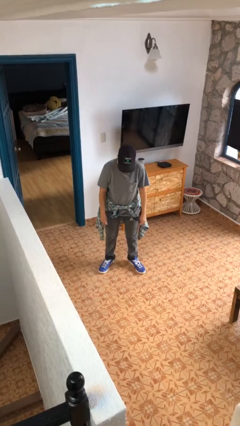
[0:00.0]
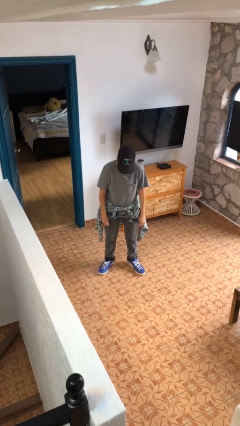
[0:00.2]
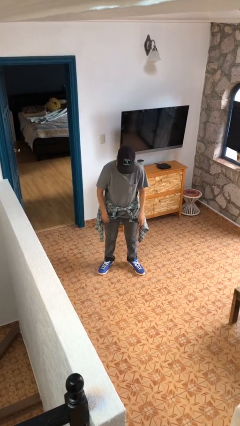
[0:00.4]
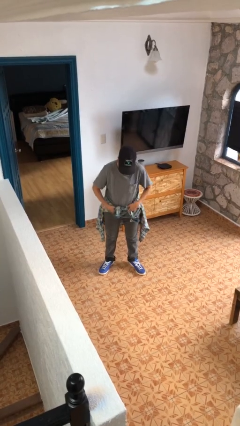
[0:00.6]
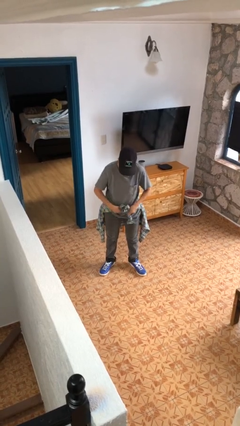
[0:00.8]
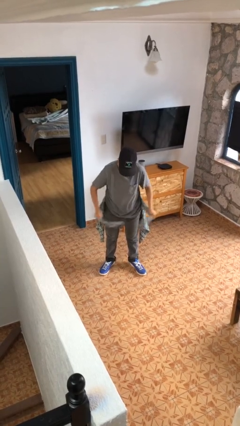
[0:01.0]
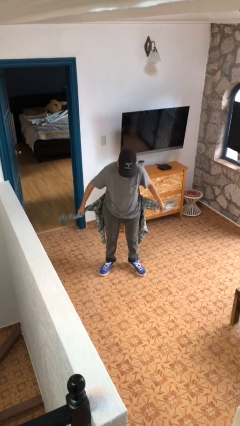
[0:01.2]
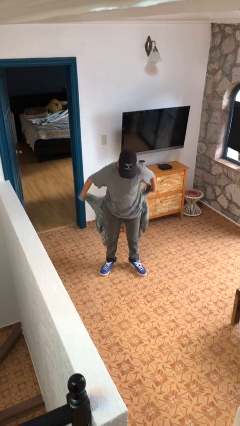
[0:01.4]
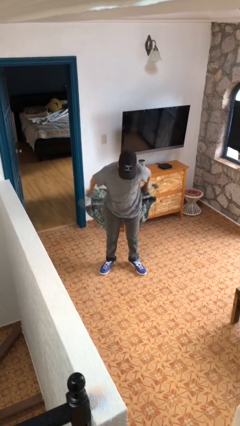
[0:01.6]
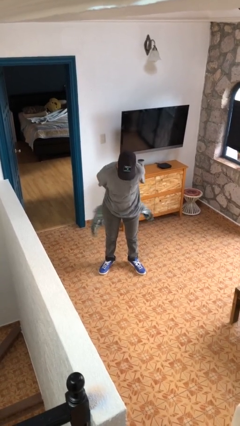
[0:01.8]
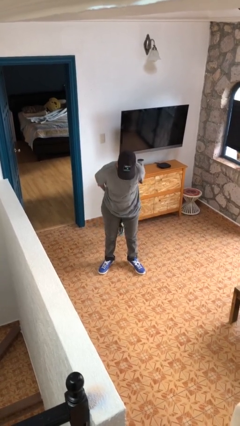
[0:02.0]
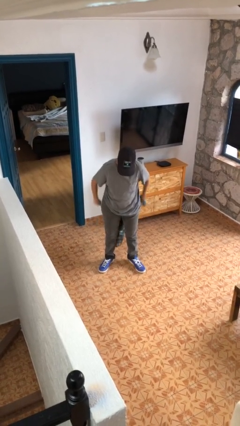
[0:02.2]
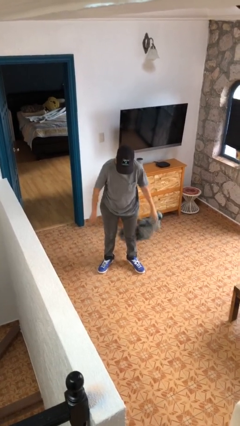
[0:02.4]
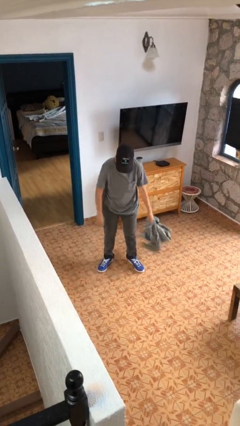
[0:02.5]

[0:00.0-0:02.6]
person unties jacket around waist

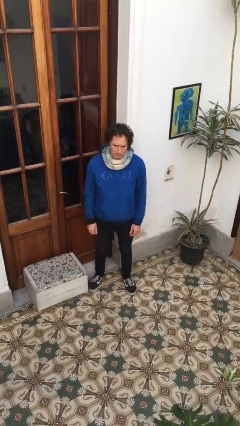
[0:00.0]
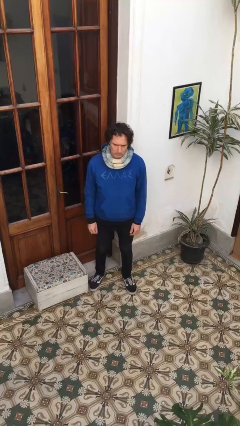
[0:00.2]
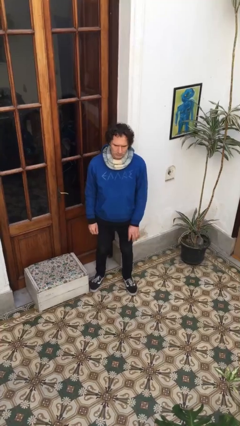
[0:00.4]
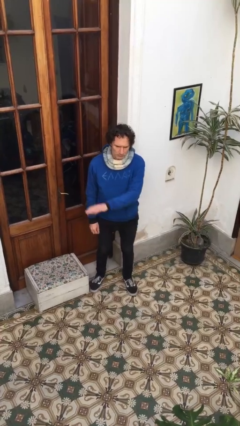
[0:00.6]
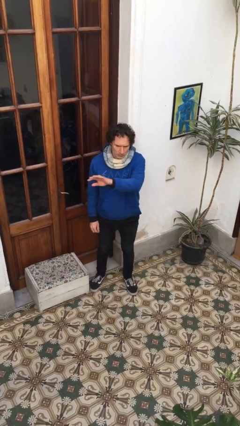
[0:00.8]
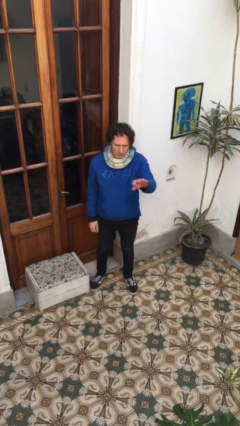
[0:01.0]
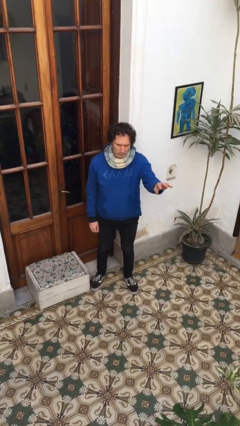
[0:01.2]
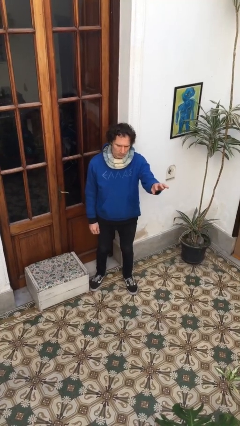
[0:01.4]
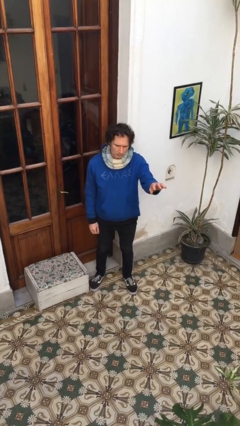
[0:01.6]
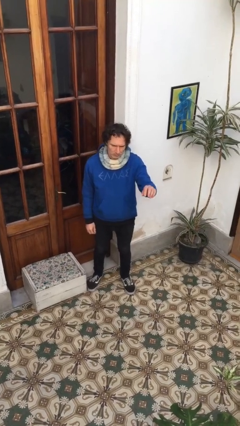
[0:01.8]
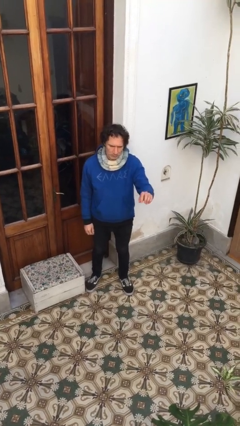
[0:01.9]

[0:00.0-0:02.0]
person gestures swipe left

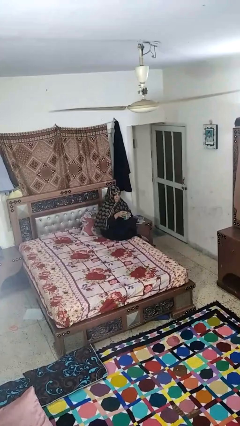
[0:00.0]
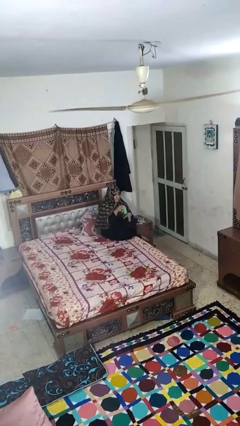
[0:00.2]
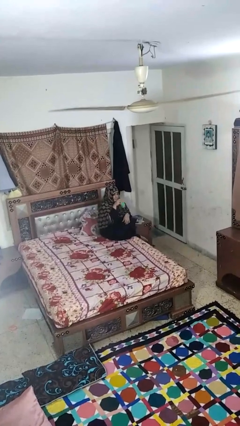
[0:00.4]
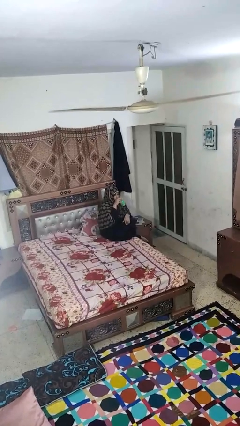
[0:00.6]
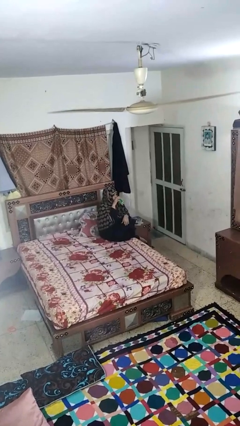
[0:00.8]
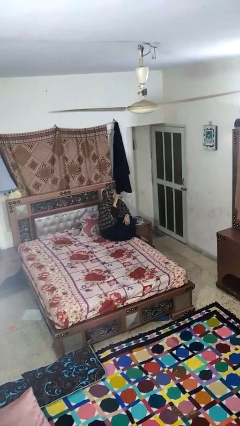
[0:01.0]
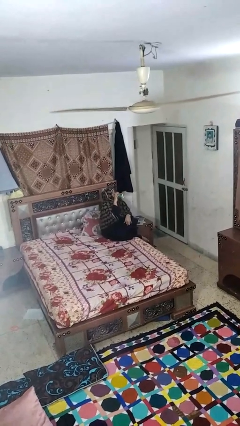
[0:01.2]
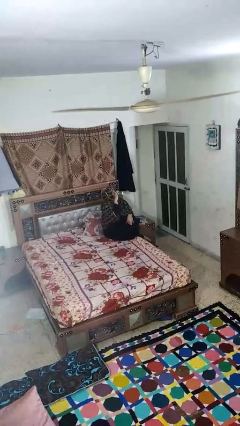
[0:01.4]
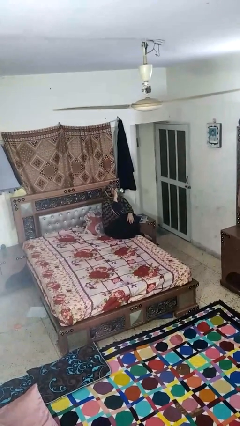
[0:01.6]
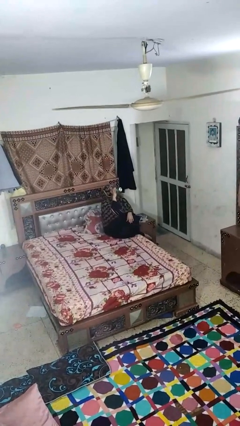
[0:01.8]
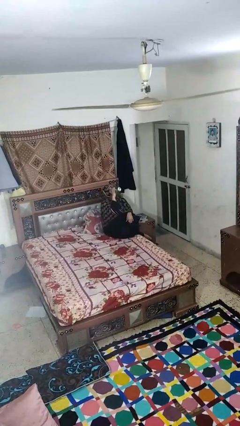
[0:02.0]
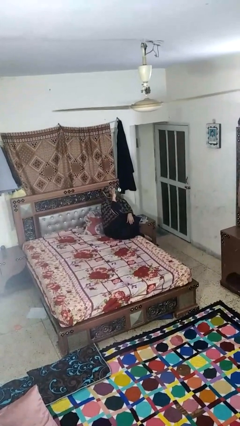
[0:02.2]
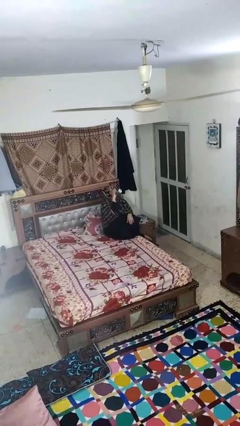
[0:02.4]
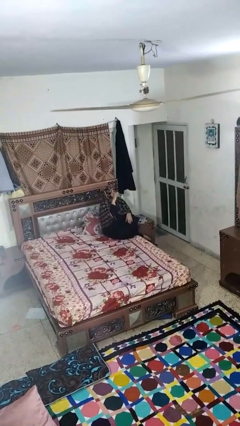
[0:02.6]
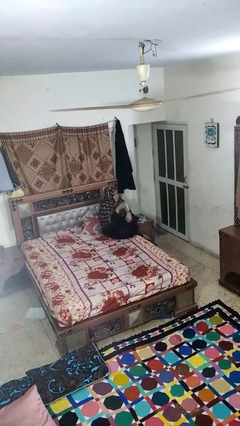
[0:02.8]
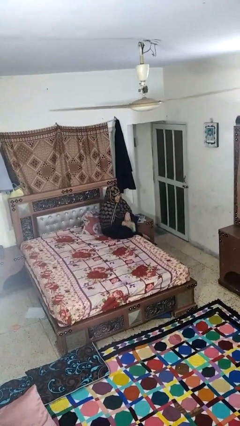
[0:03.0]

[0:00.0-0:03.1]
person drinks from beverage can

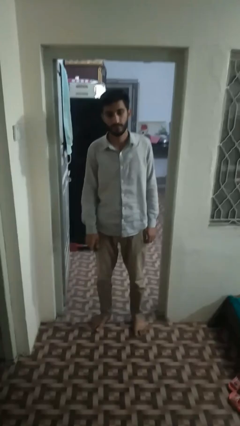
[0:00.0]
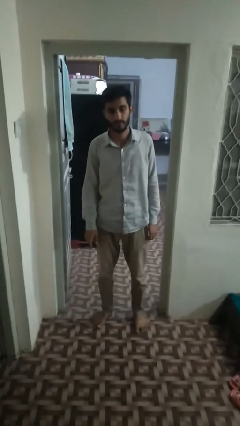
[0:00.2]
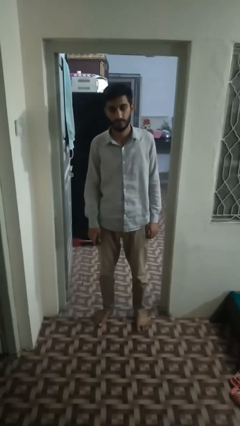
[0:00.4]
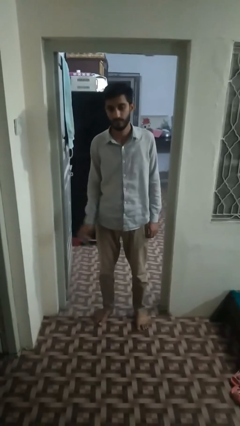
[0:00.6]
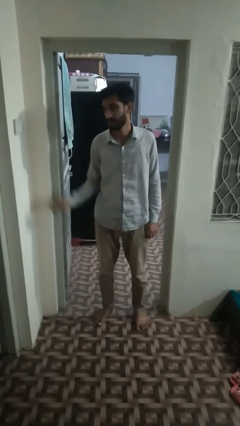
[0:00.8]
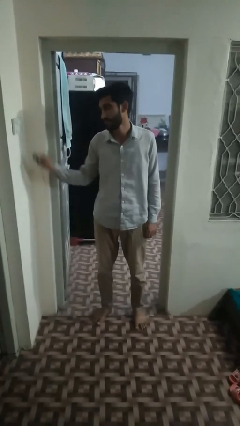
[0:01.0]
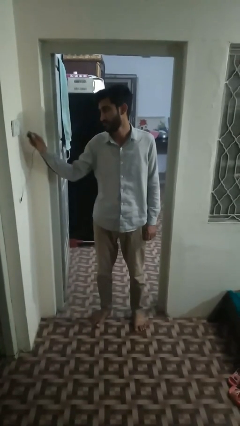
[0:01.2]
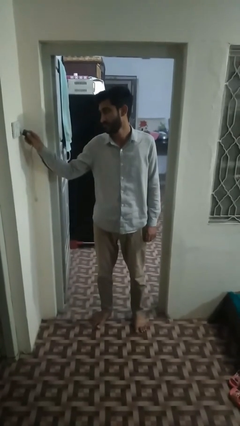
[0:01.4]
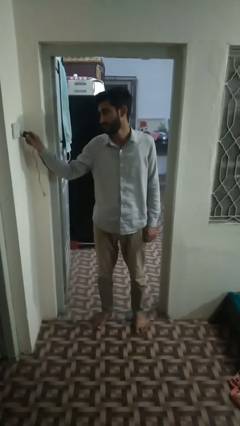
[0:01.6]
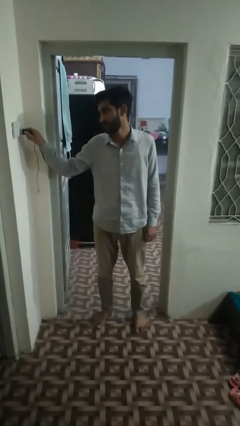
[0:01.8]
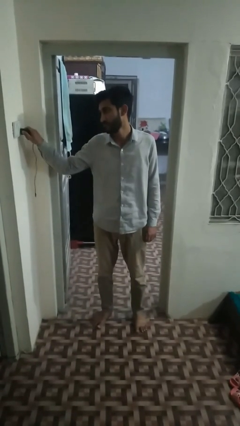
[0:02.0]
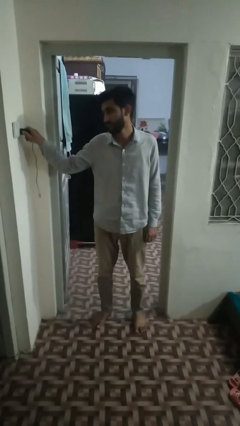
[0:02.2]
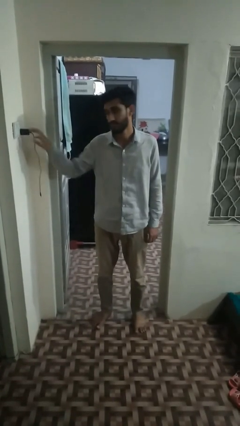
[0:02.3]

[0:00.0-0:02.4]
person plugs into electrical socket

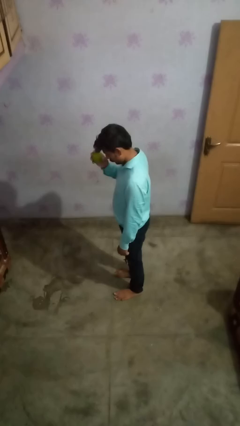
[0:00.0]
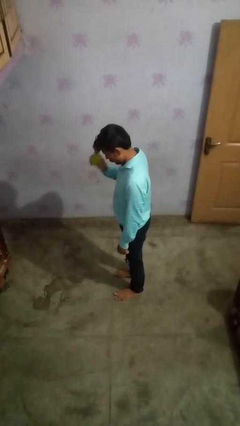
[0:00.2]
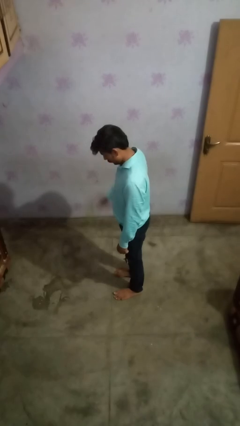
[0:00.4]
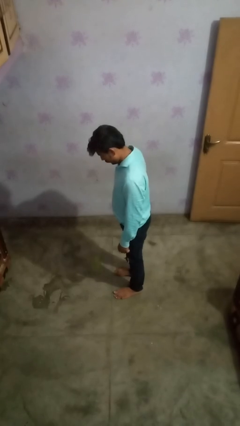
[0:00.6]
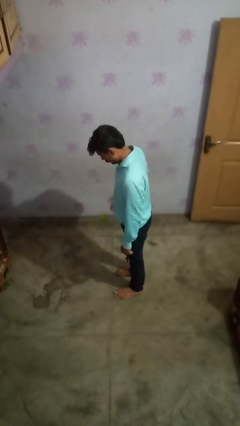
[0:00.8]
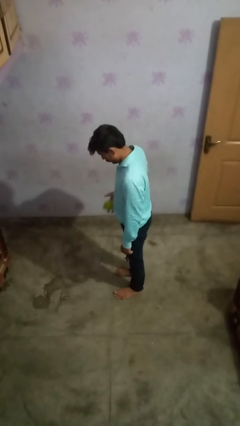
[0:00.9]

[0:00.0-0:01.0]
person bounces ball on floor

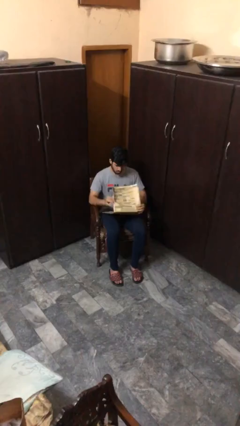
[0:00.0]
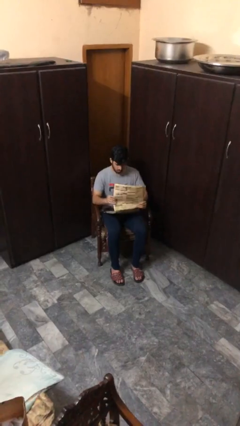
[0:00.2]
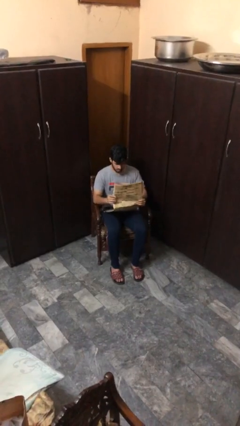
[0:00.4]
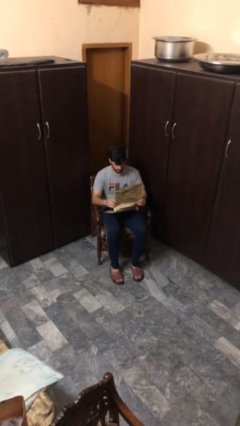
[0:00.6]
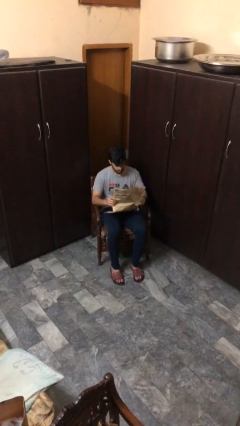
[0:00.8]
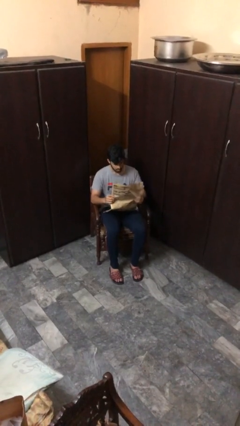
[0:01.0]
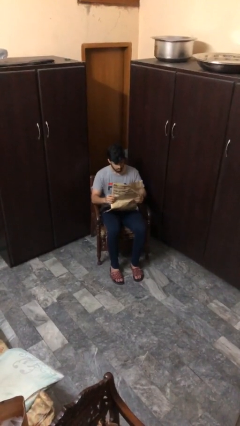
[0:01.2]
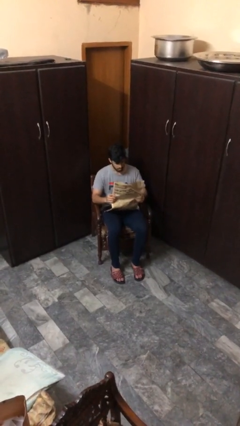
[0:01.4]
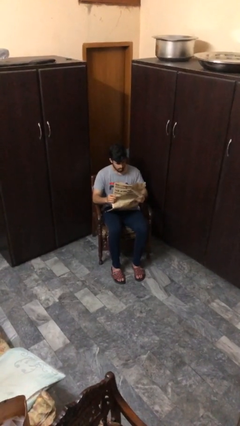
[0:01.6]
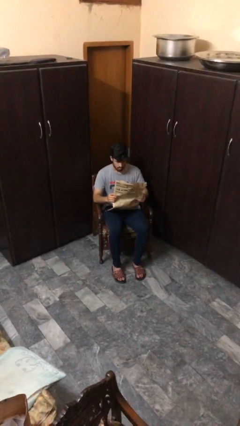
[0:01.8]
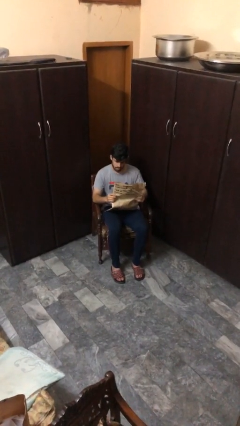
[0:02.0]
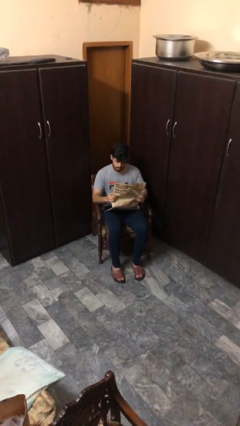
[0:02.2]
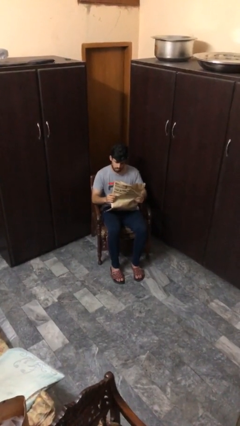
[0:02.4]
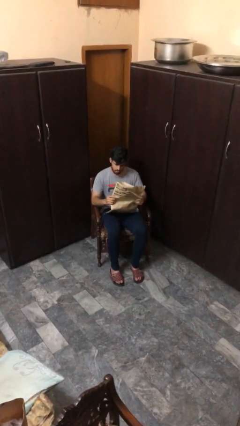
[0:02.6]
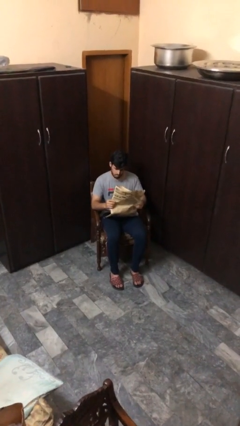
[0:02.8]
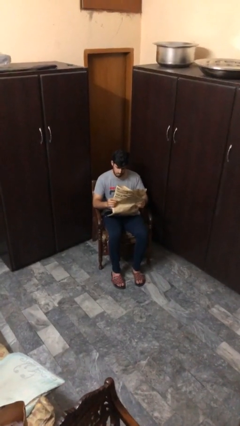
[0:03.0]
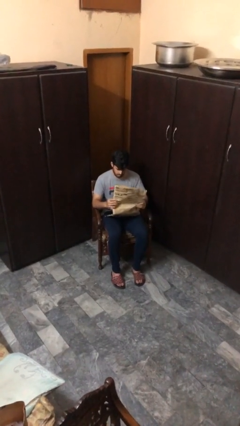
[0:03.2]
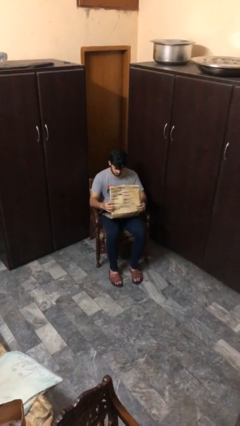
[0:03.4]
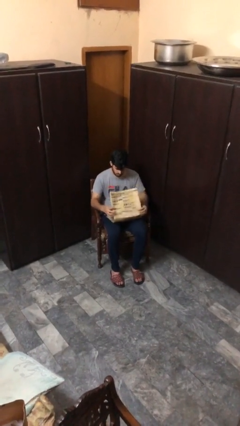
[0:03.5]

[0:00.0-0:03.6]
person reads newspaper

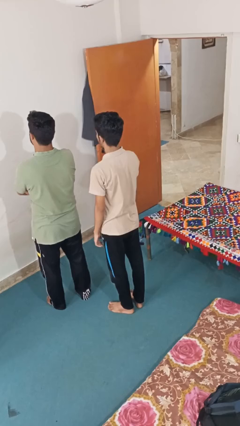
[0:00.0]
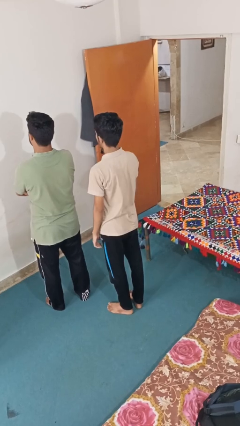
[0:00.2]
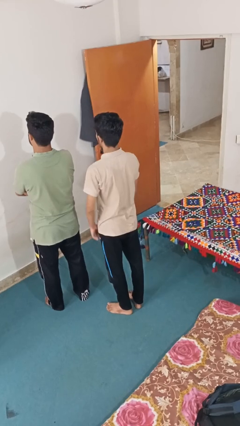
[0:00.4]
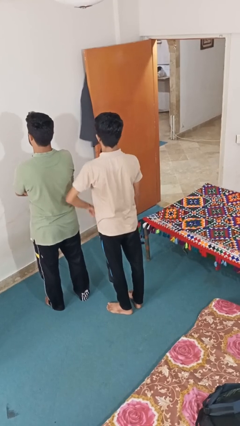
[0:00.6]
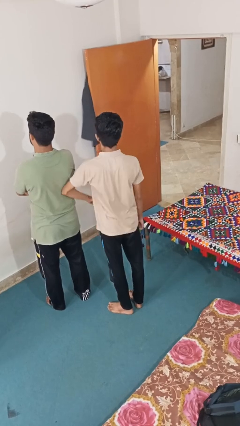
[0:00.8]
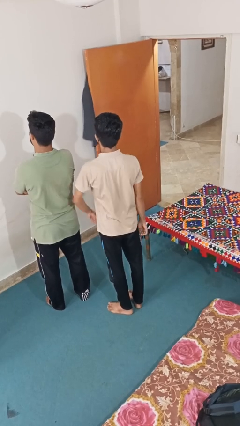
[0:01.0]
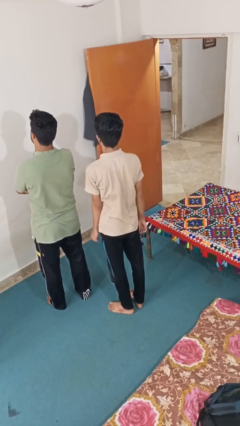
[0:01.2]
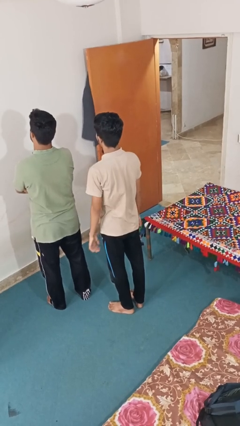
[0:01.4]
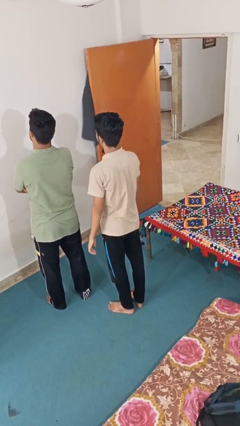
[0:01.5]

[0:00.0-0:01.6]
person nudges person with elbow

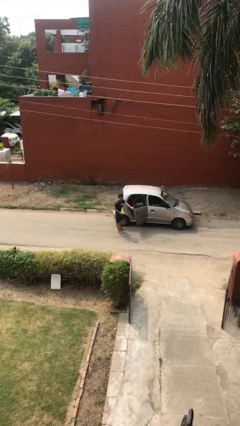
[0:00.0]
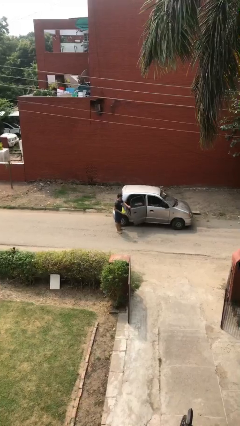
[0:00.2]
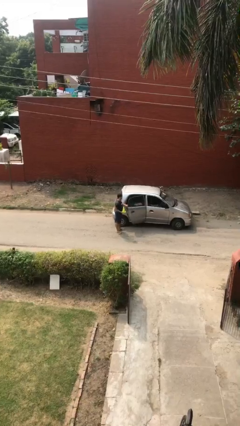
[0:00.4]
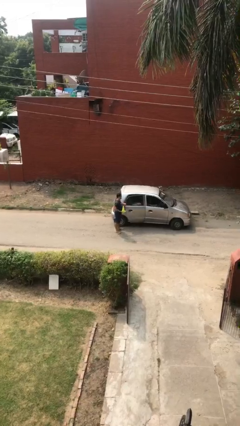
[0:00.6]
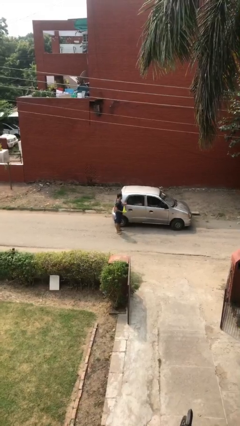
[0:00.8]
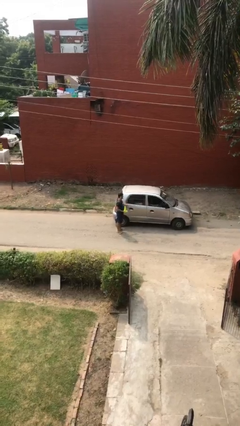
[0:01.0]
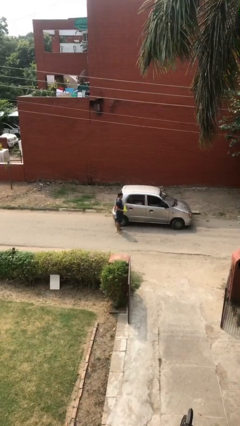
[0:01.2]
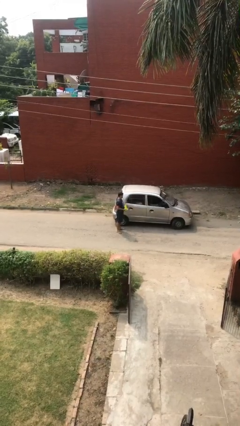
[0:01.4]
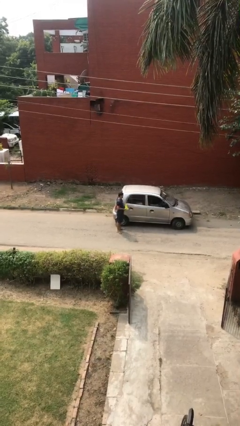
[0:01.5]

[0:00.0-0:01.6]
person closes car door
